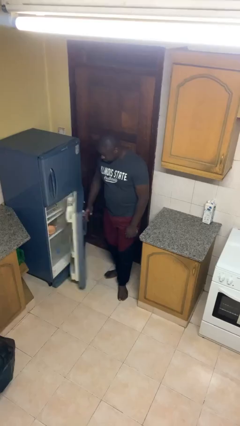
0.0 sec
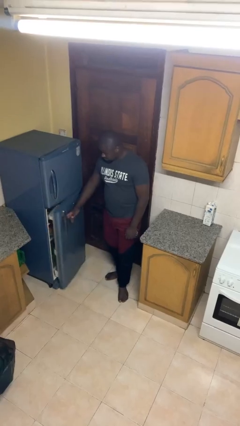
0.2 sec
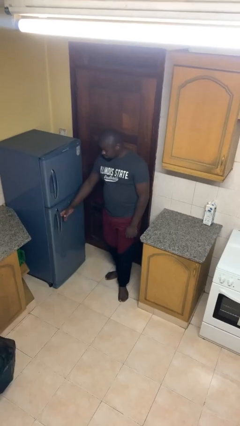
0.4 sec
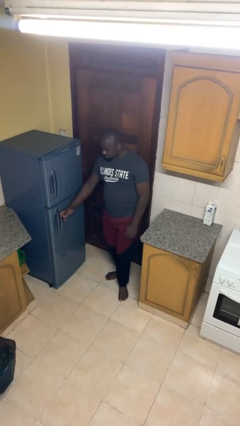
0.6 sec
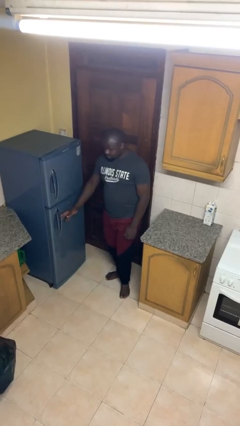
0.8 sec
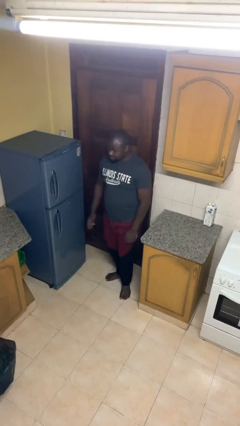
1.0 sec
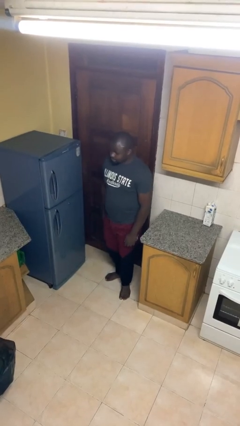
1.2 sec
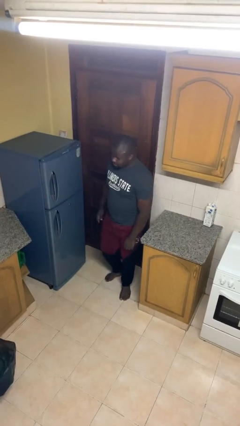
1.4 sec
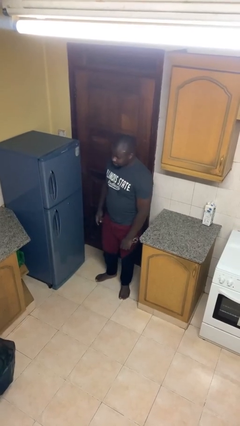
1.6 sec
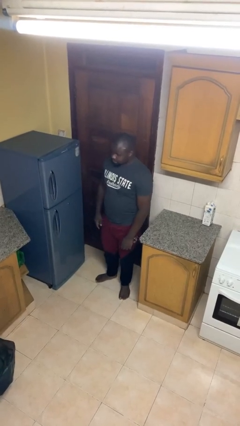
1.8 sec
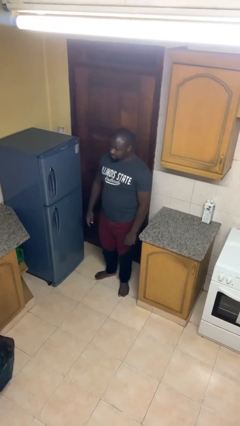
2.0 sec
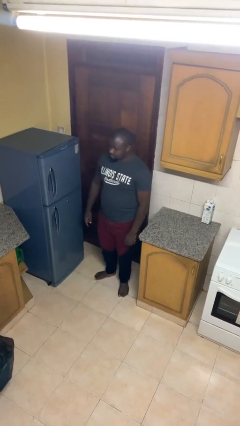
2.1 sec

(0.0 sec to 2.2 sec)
person closes refrigerator

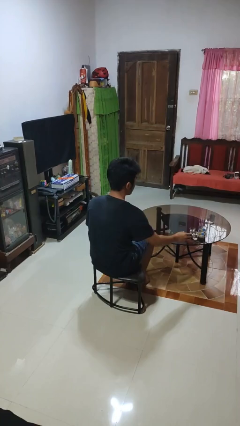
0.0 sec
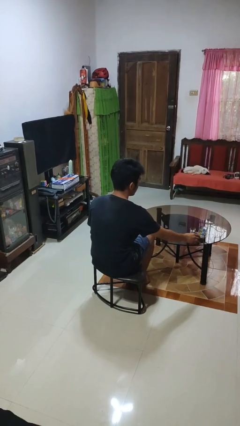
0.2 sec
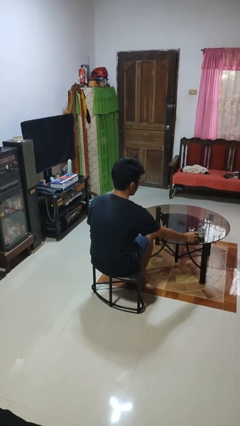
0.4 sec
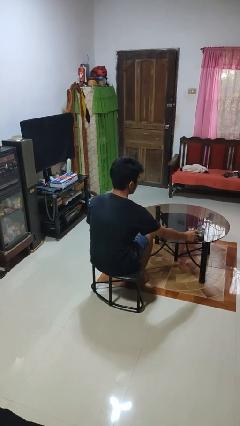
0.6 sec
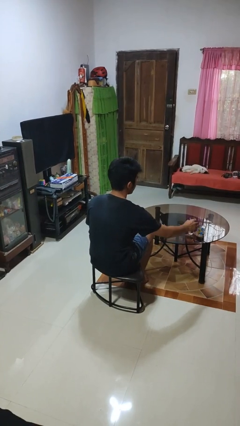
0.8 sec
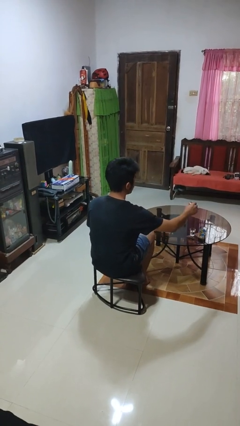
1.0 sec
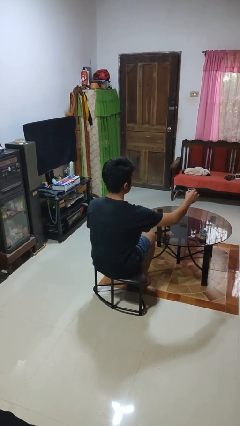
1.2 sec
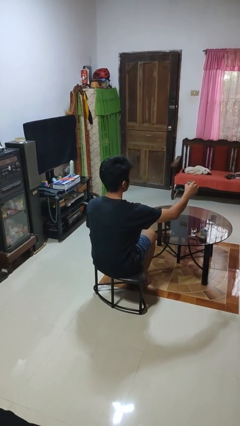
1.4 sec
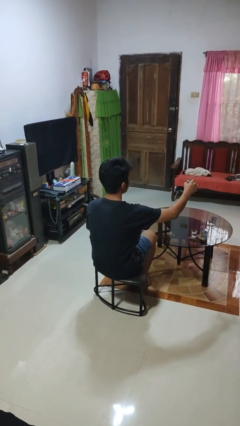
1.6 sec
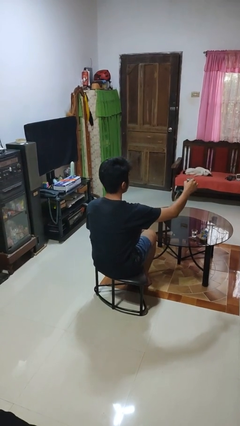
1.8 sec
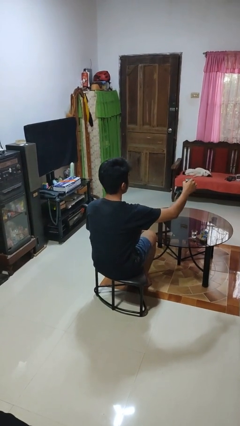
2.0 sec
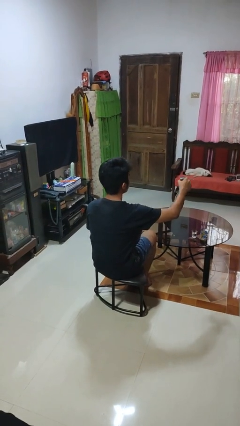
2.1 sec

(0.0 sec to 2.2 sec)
person picks up object from table

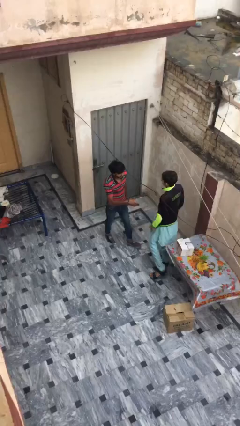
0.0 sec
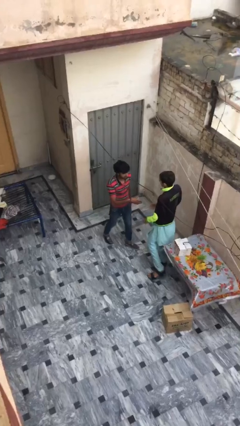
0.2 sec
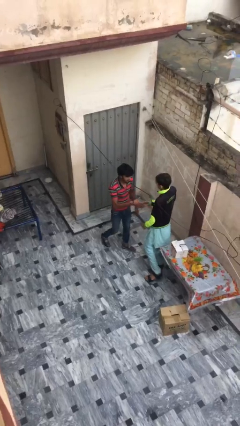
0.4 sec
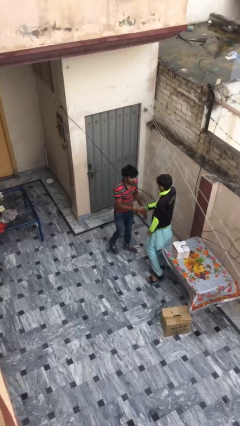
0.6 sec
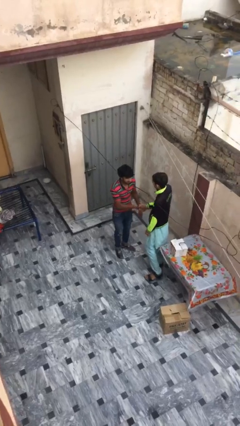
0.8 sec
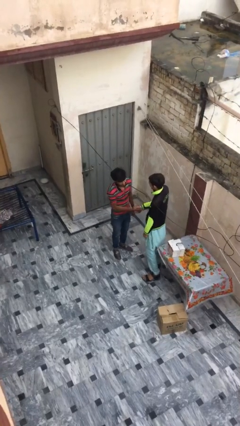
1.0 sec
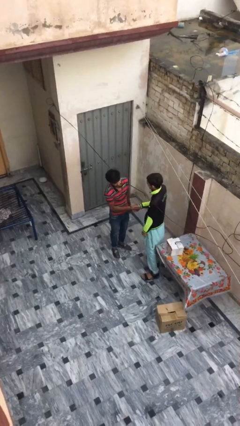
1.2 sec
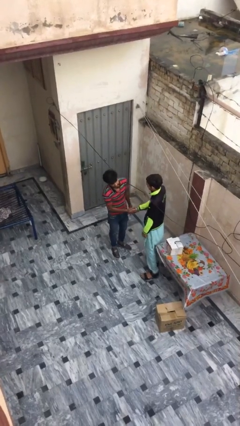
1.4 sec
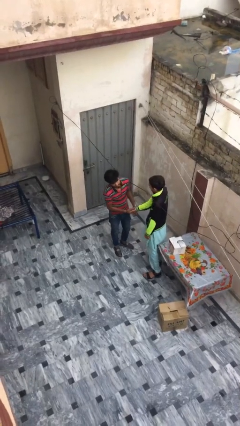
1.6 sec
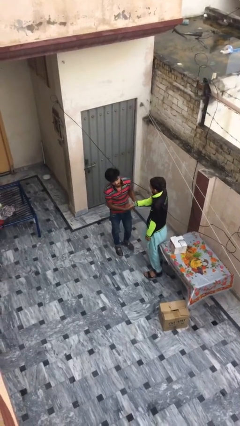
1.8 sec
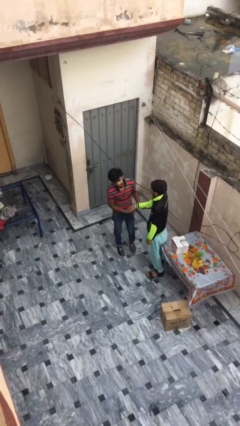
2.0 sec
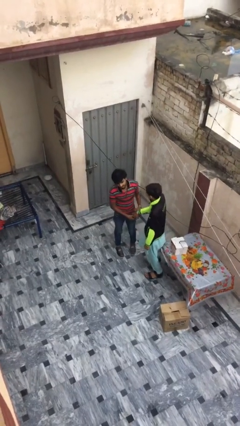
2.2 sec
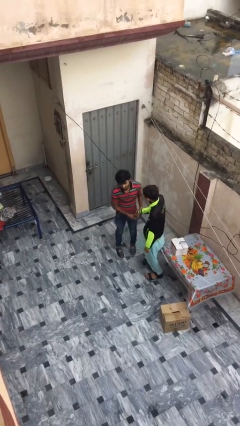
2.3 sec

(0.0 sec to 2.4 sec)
person shakes hand

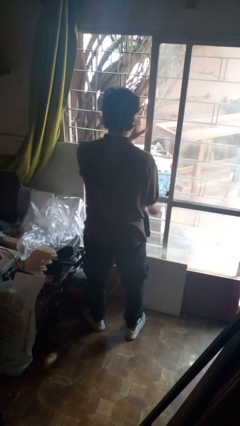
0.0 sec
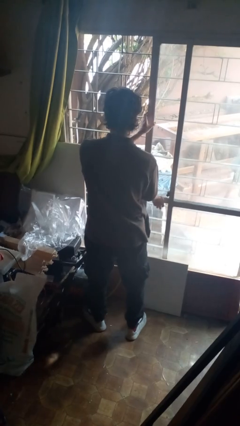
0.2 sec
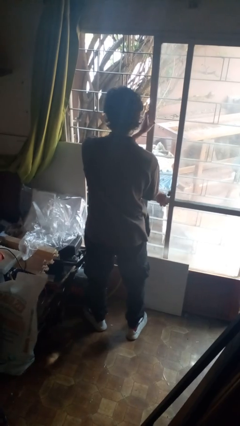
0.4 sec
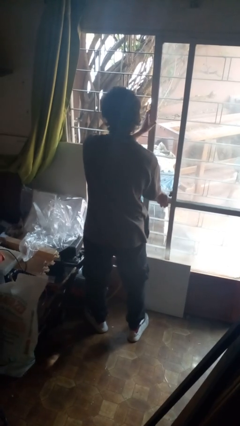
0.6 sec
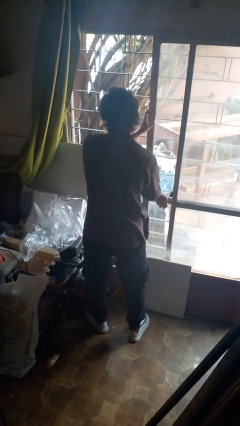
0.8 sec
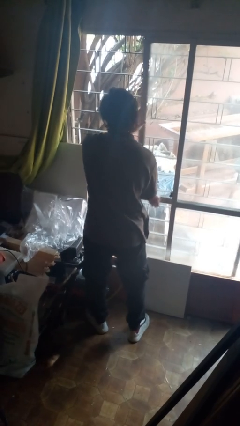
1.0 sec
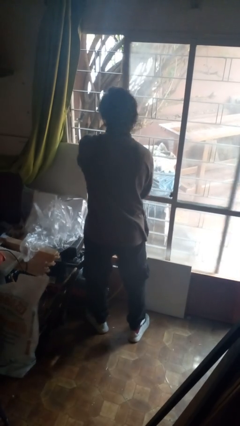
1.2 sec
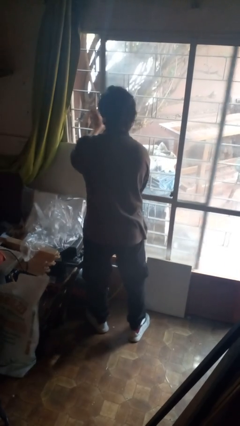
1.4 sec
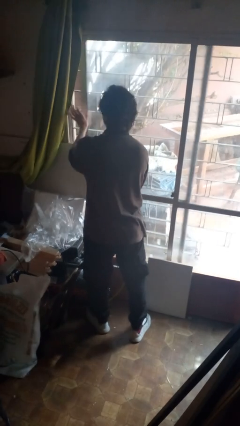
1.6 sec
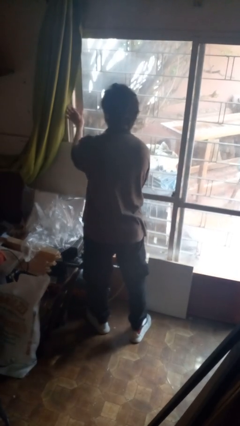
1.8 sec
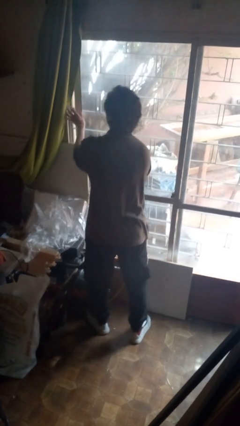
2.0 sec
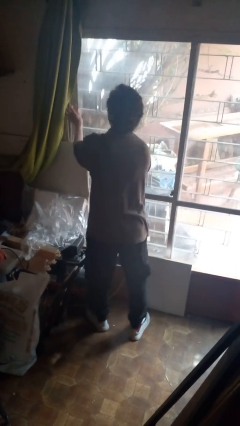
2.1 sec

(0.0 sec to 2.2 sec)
person closes sliding door

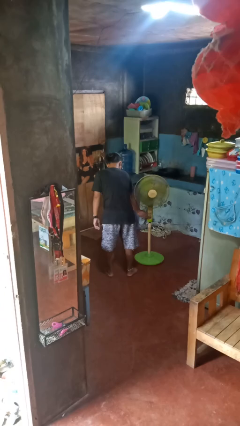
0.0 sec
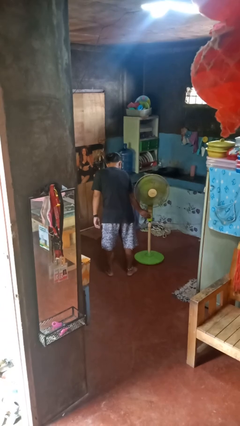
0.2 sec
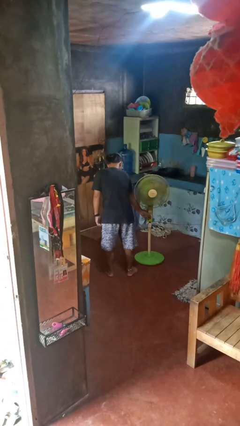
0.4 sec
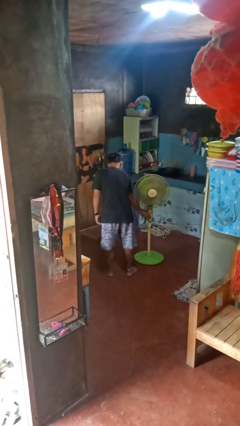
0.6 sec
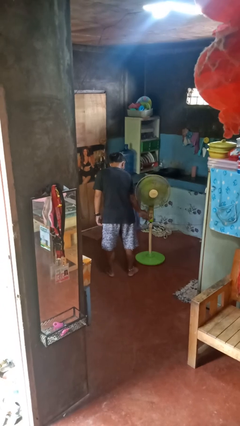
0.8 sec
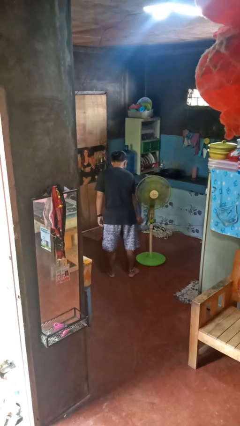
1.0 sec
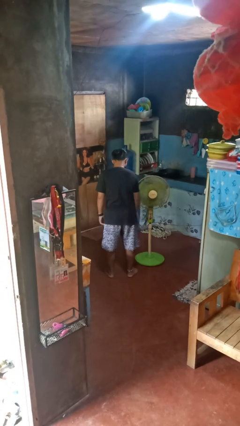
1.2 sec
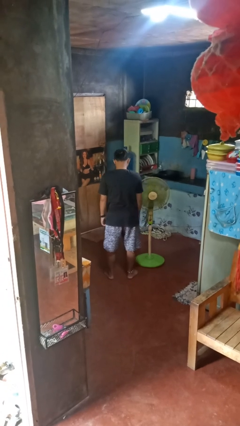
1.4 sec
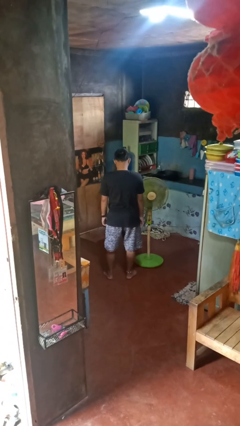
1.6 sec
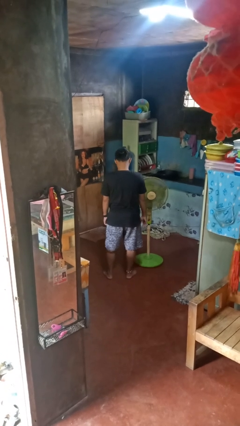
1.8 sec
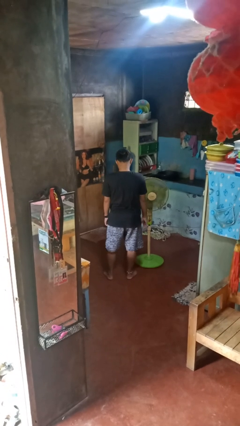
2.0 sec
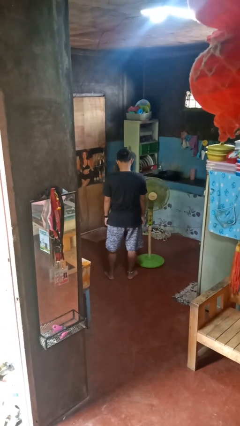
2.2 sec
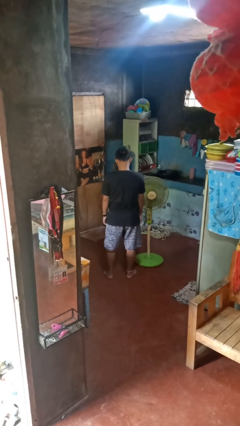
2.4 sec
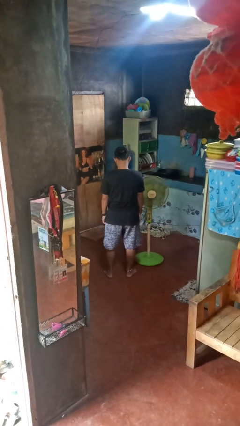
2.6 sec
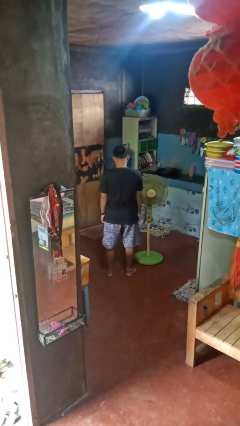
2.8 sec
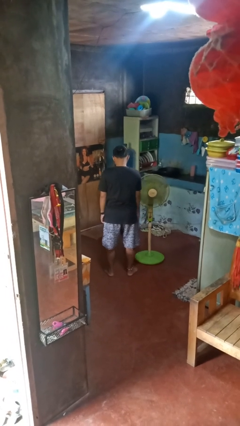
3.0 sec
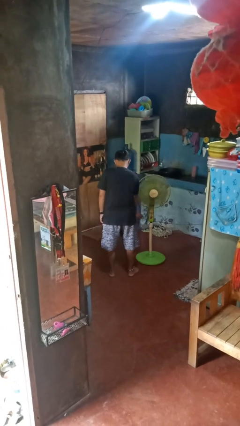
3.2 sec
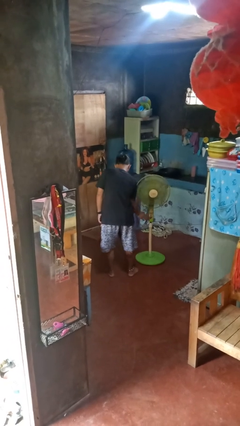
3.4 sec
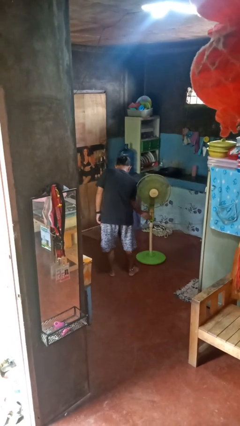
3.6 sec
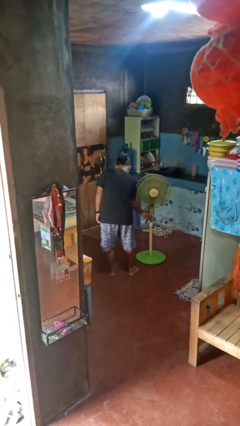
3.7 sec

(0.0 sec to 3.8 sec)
person turns on fan

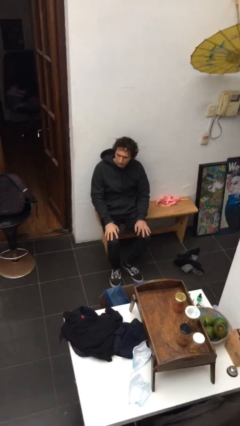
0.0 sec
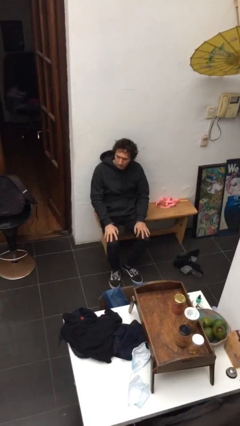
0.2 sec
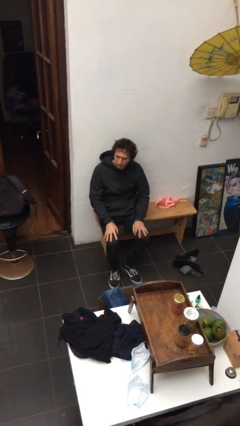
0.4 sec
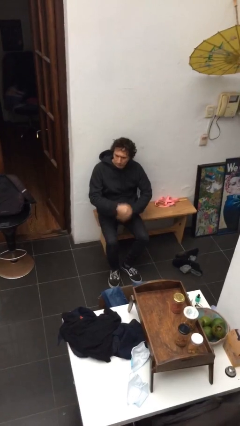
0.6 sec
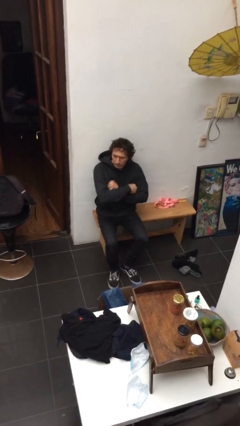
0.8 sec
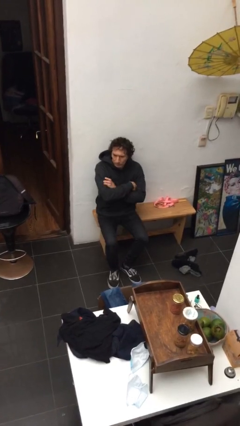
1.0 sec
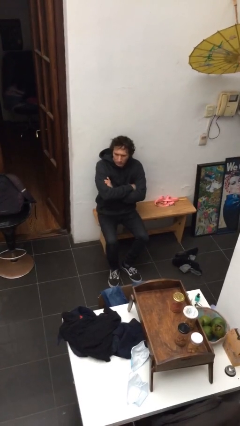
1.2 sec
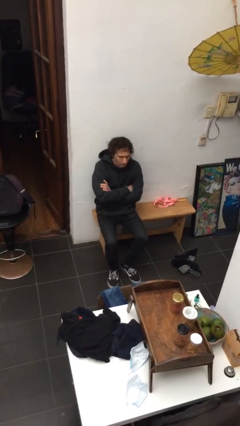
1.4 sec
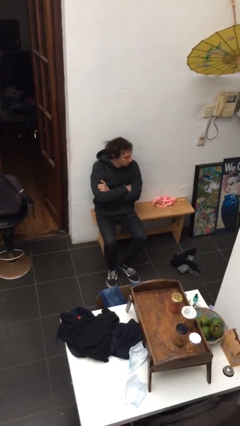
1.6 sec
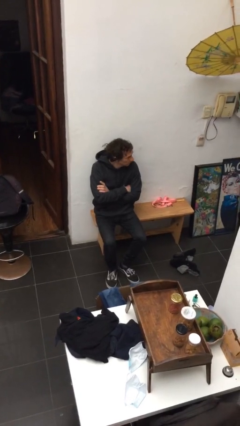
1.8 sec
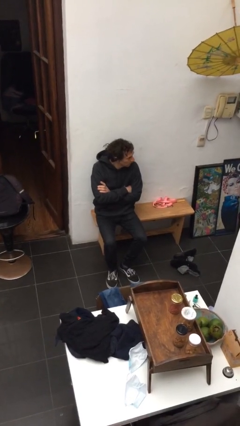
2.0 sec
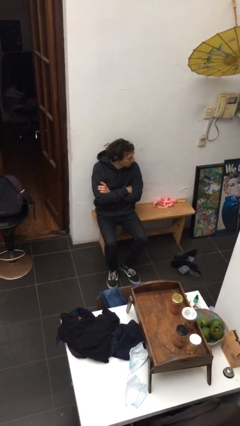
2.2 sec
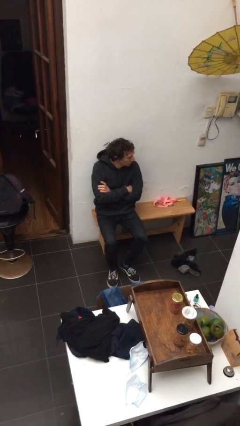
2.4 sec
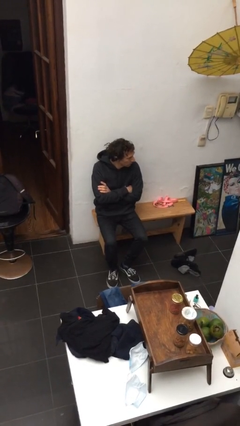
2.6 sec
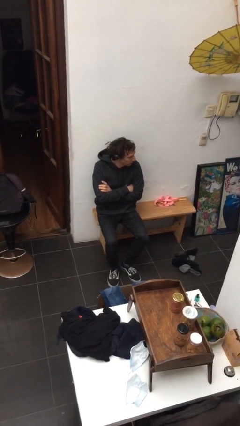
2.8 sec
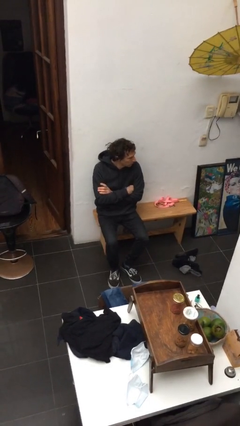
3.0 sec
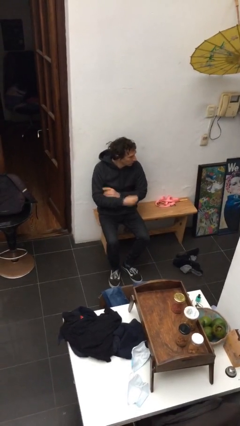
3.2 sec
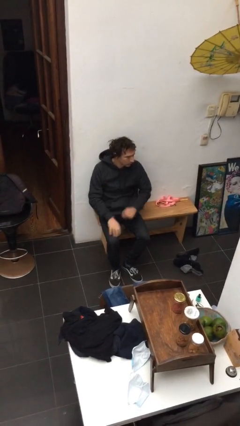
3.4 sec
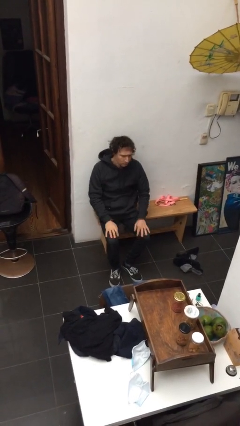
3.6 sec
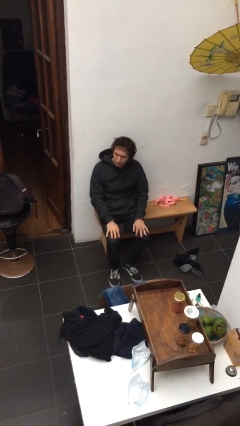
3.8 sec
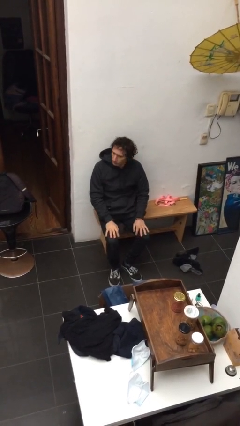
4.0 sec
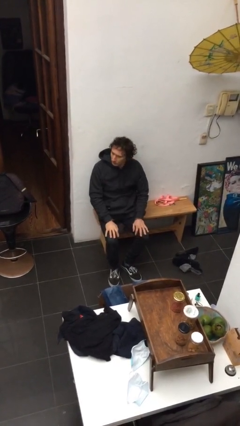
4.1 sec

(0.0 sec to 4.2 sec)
person crosses arms

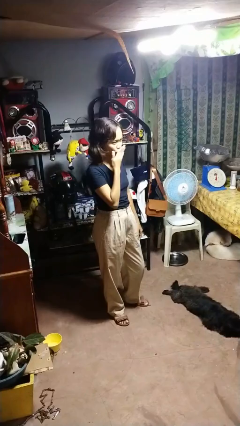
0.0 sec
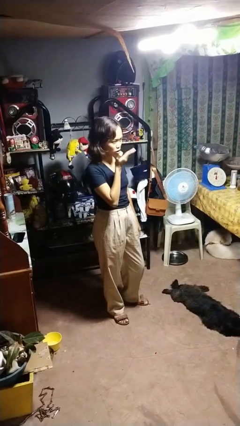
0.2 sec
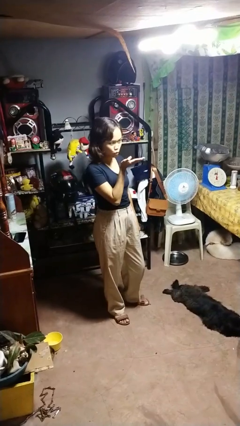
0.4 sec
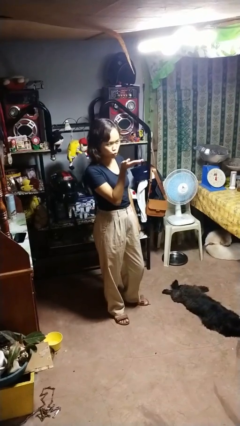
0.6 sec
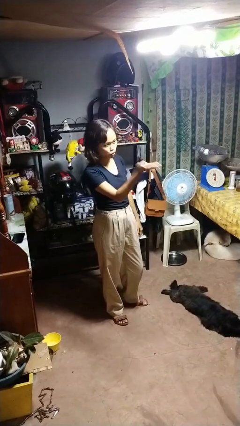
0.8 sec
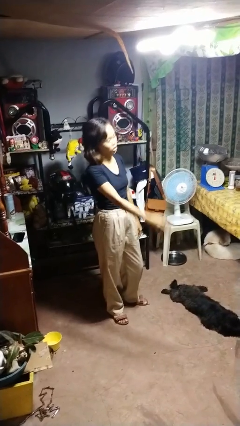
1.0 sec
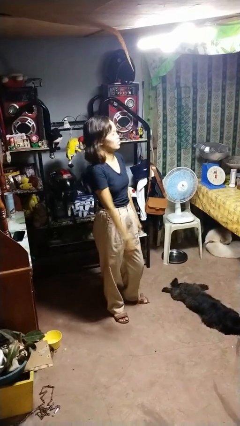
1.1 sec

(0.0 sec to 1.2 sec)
person gestures blow kiss
